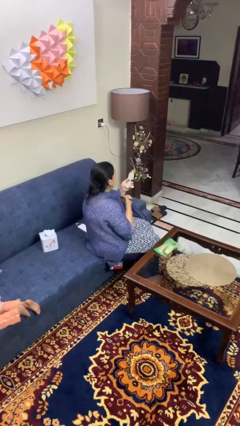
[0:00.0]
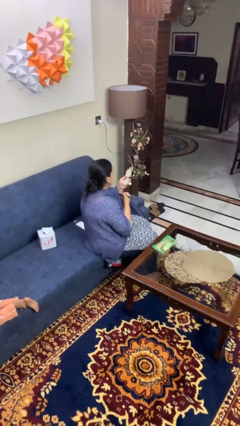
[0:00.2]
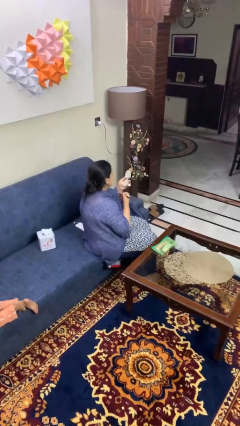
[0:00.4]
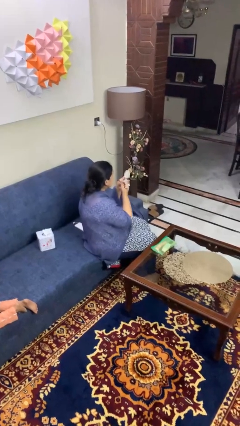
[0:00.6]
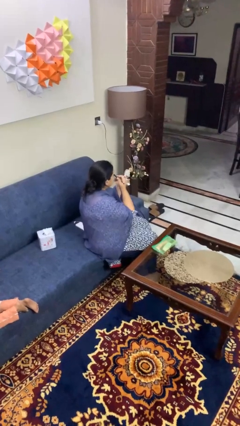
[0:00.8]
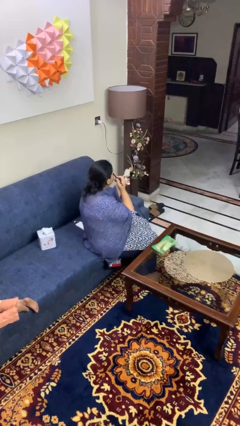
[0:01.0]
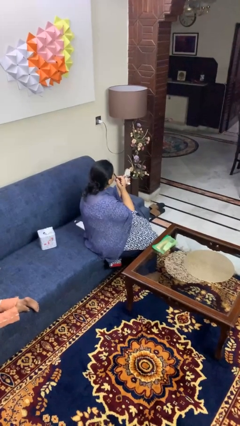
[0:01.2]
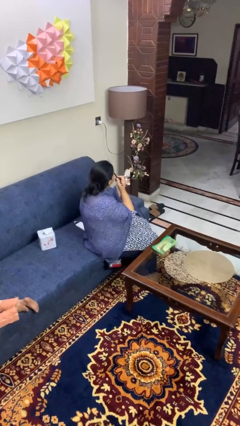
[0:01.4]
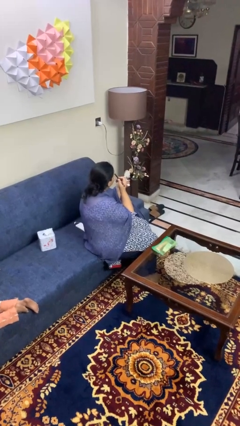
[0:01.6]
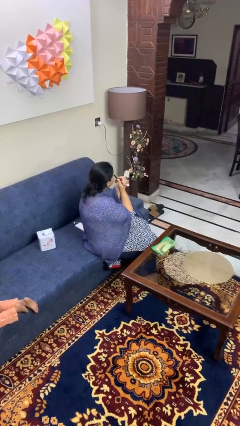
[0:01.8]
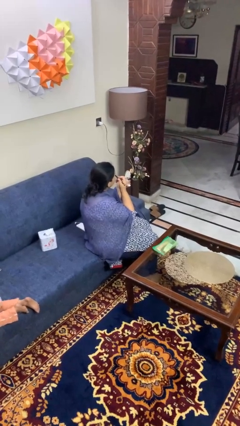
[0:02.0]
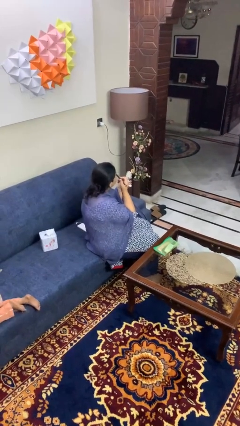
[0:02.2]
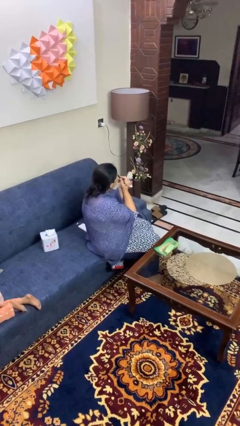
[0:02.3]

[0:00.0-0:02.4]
person applies eye makeup

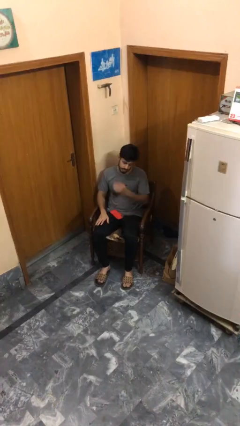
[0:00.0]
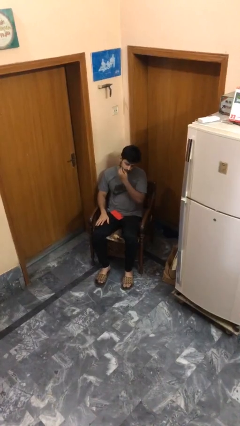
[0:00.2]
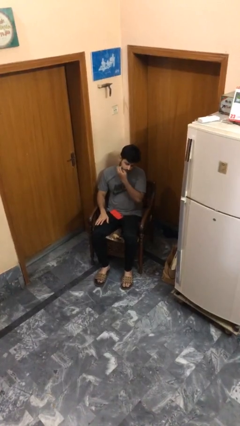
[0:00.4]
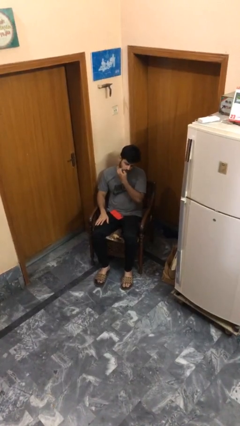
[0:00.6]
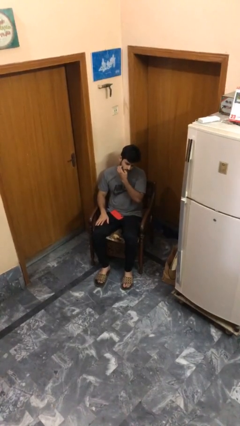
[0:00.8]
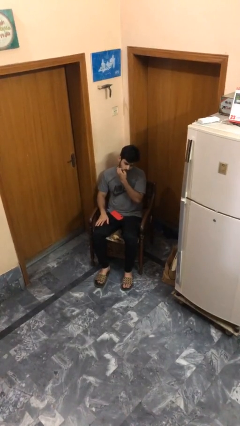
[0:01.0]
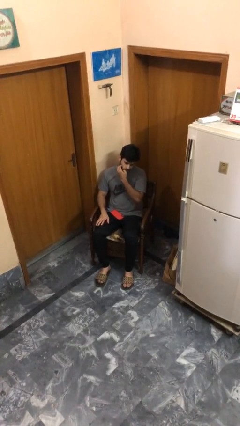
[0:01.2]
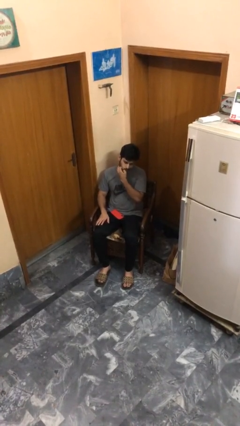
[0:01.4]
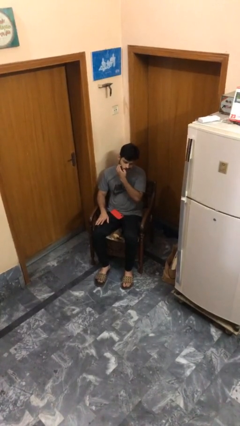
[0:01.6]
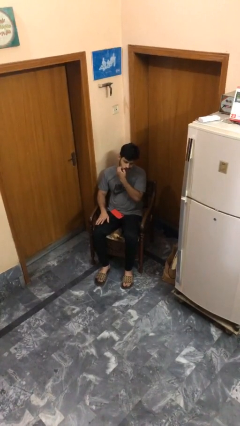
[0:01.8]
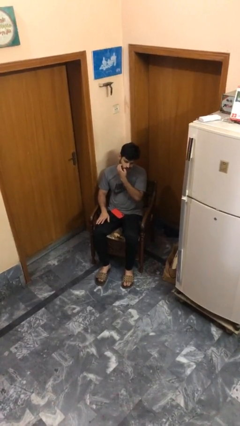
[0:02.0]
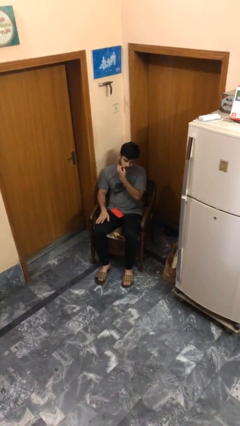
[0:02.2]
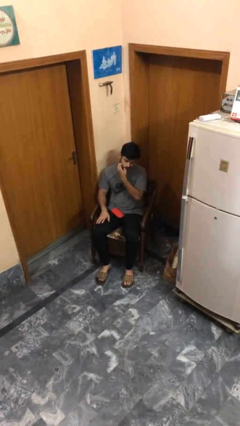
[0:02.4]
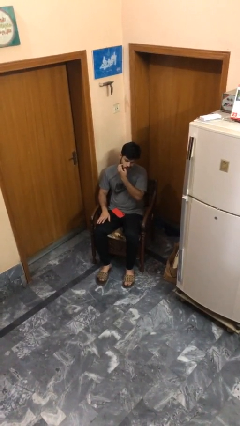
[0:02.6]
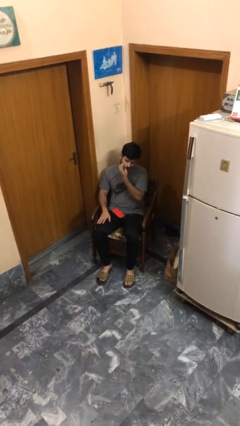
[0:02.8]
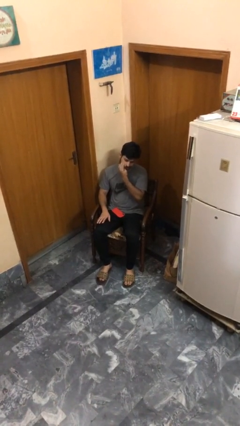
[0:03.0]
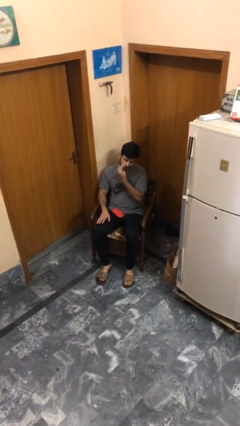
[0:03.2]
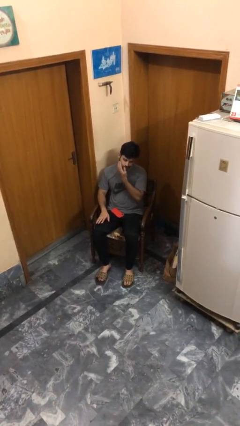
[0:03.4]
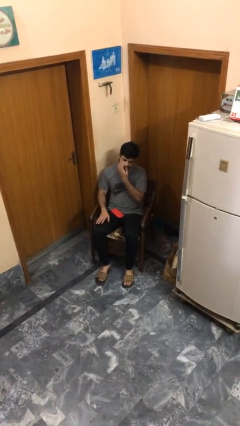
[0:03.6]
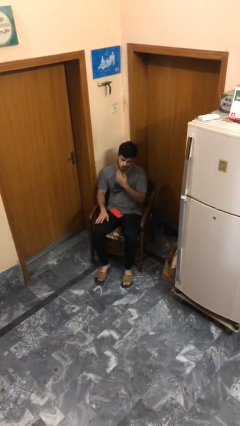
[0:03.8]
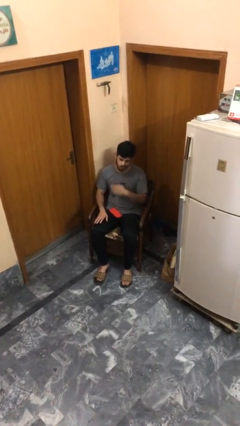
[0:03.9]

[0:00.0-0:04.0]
person scratches face

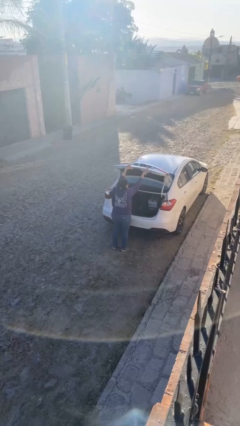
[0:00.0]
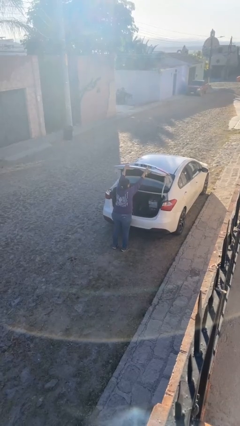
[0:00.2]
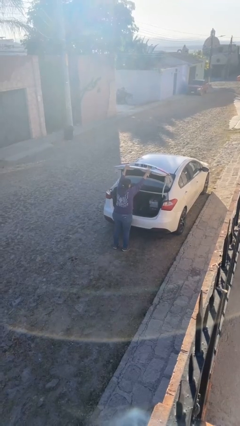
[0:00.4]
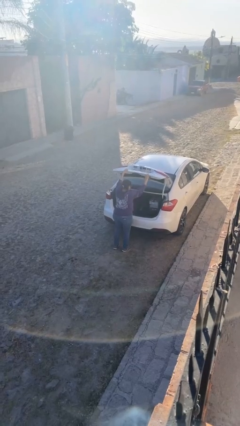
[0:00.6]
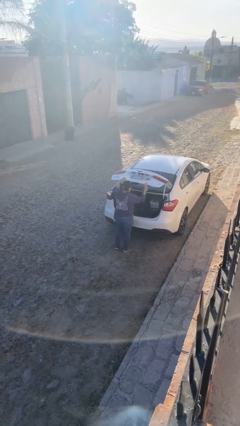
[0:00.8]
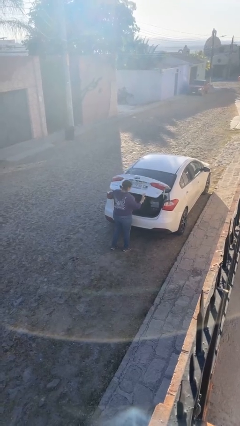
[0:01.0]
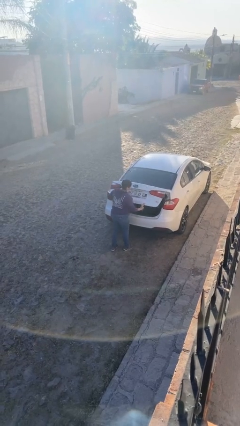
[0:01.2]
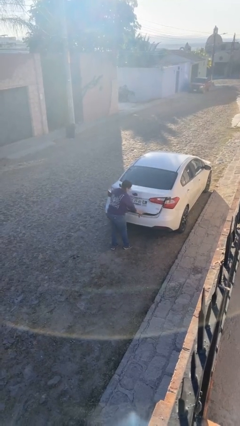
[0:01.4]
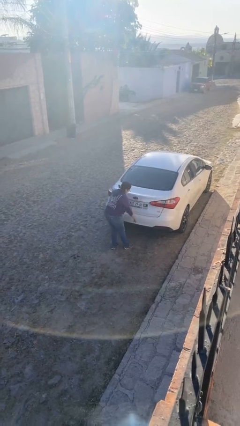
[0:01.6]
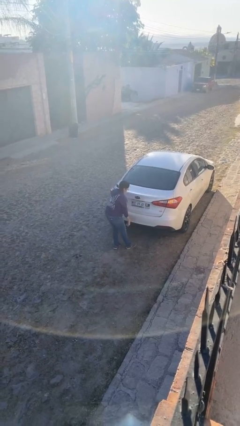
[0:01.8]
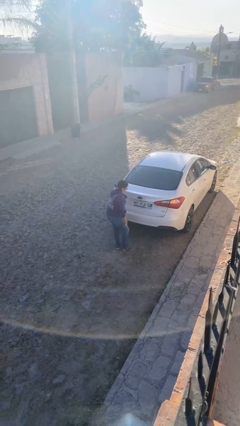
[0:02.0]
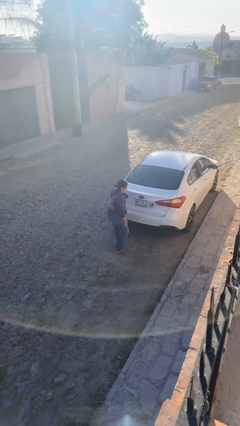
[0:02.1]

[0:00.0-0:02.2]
person closes car trunk

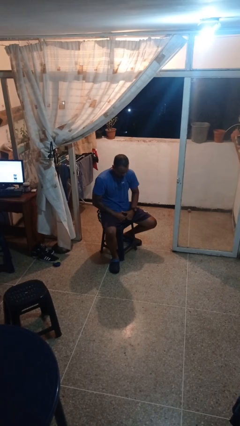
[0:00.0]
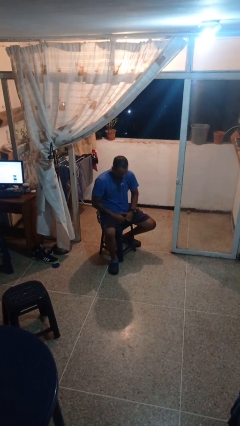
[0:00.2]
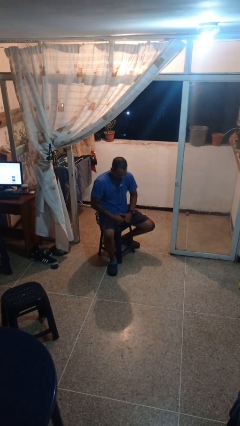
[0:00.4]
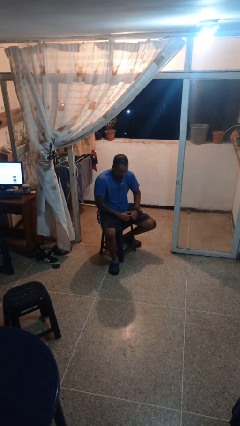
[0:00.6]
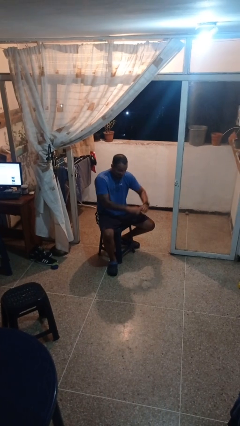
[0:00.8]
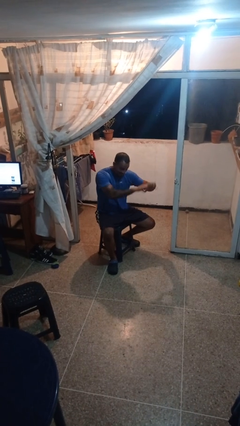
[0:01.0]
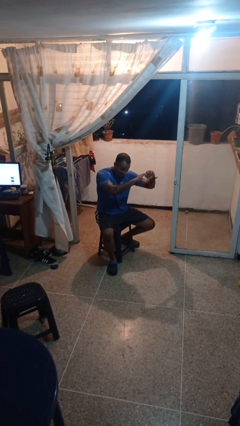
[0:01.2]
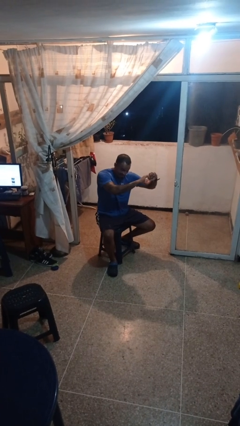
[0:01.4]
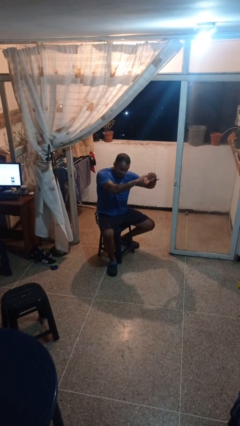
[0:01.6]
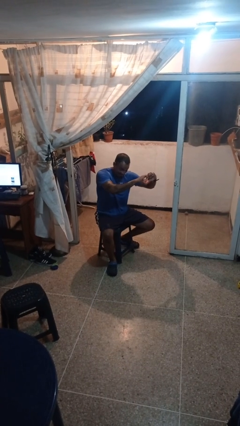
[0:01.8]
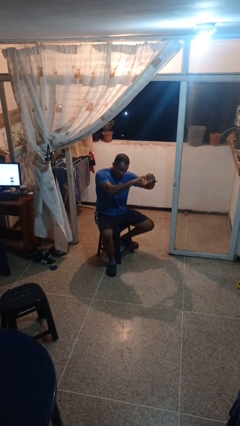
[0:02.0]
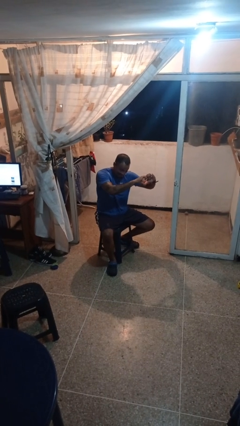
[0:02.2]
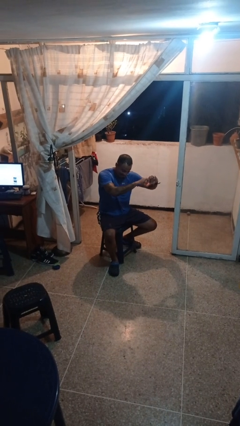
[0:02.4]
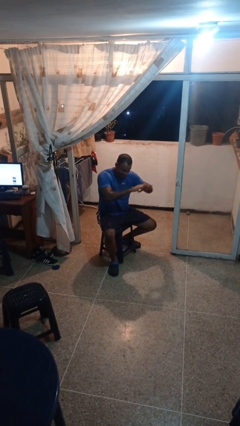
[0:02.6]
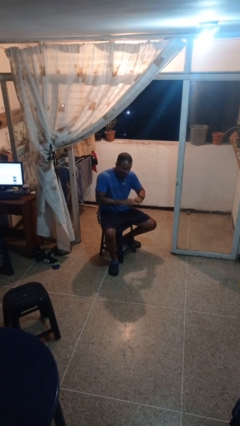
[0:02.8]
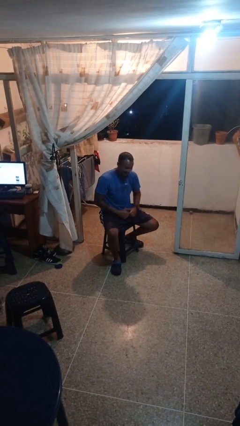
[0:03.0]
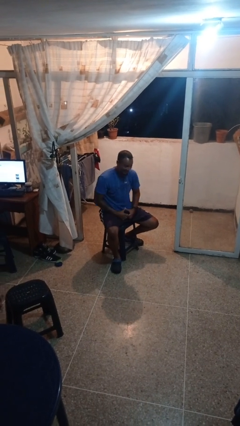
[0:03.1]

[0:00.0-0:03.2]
person gestures heart

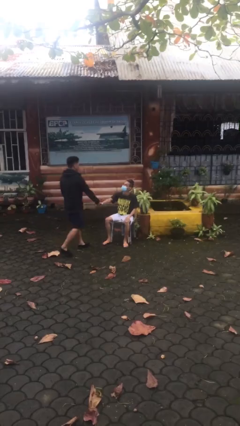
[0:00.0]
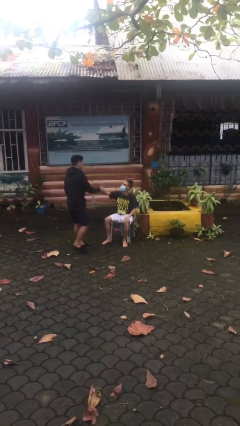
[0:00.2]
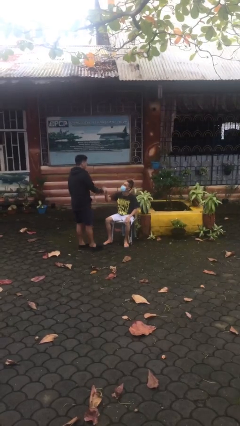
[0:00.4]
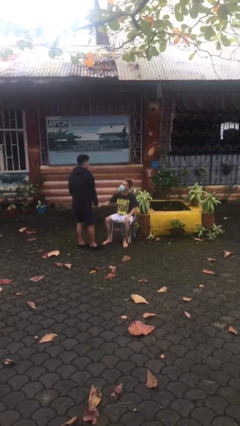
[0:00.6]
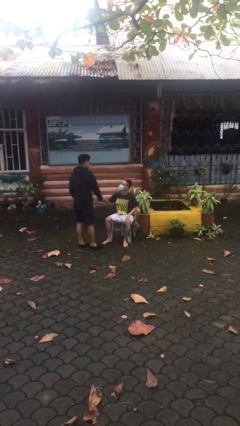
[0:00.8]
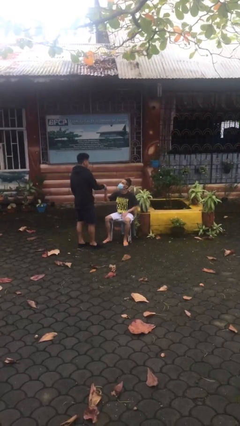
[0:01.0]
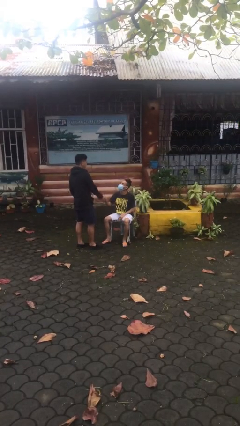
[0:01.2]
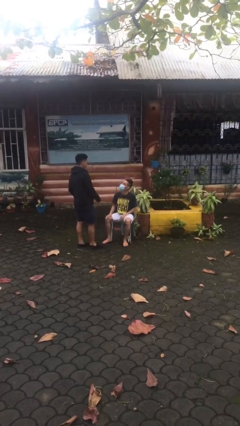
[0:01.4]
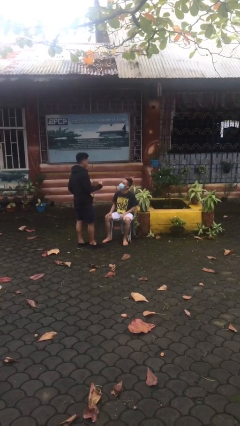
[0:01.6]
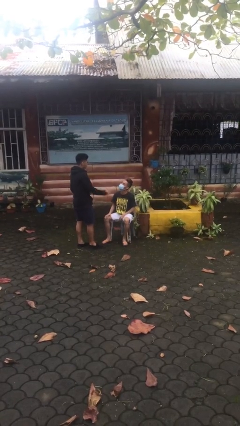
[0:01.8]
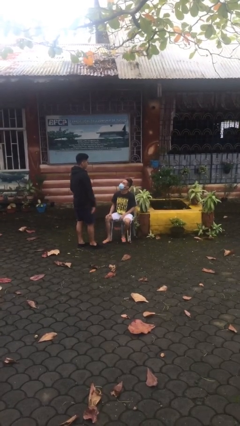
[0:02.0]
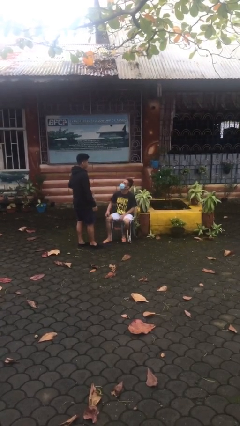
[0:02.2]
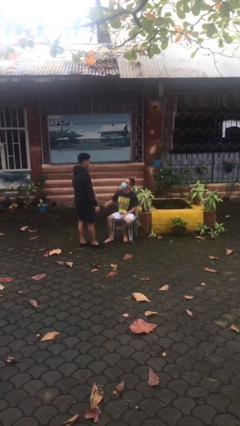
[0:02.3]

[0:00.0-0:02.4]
person shakes hand

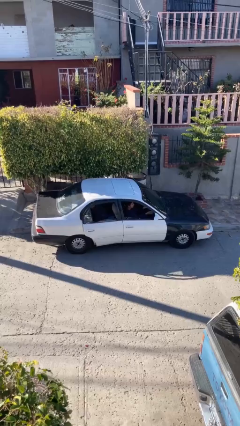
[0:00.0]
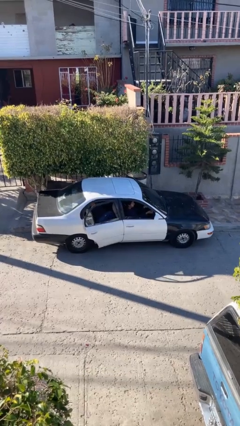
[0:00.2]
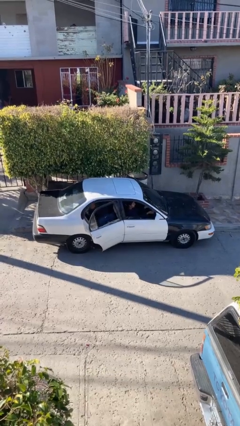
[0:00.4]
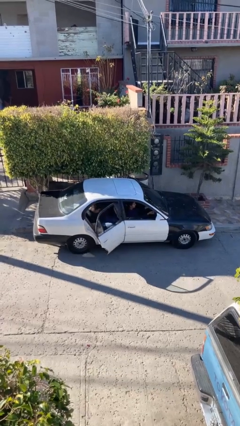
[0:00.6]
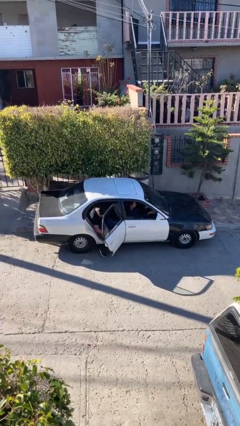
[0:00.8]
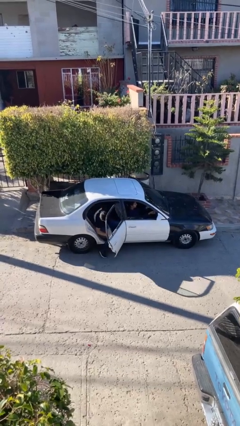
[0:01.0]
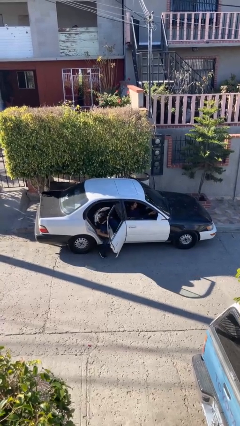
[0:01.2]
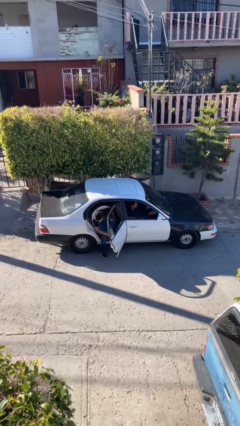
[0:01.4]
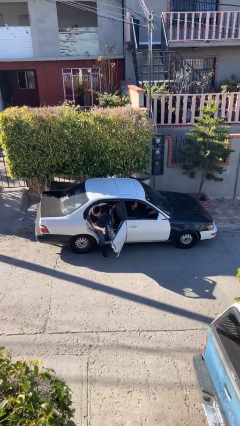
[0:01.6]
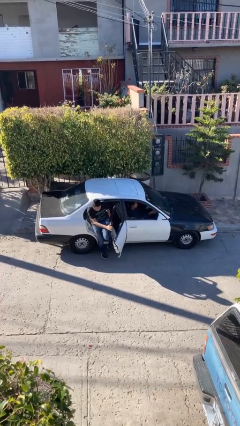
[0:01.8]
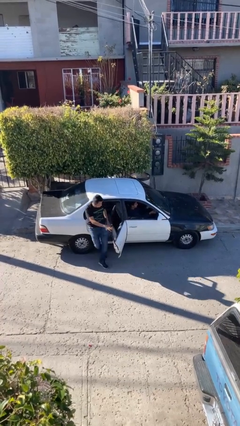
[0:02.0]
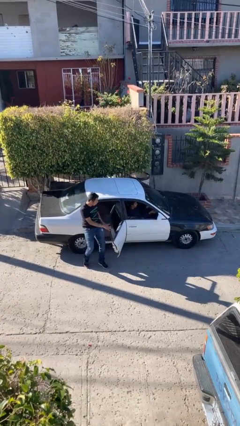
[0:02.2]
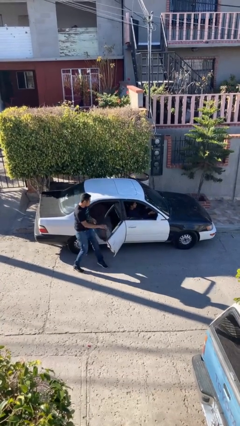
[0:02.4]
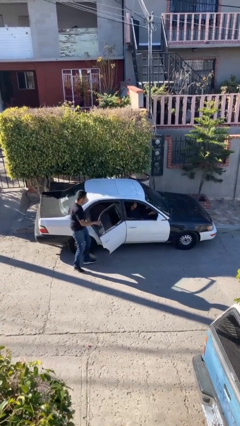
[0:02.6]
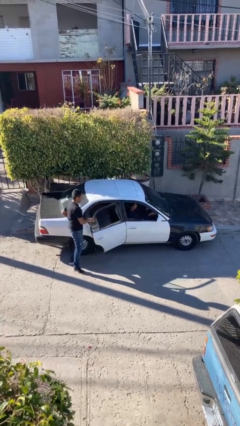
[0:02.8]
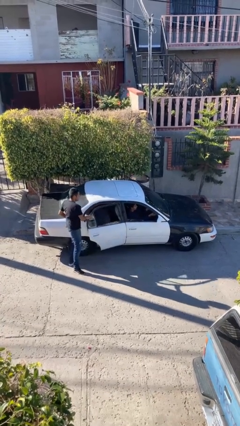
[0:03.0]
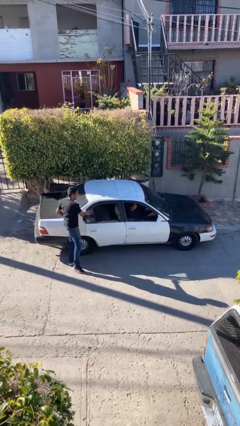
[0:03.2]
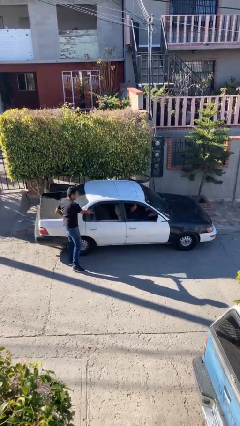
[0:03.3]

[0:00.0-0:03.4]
car drops off person
